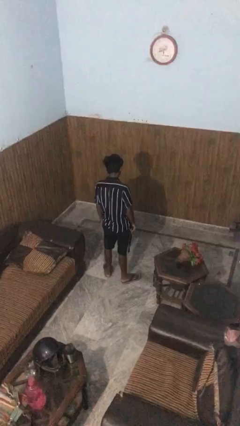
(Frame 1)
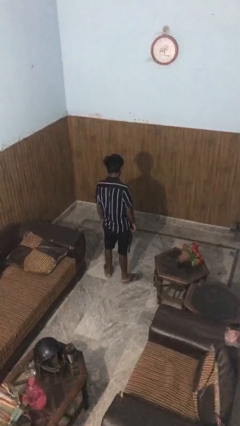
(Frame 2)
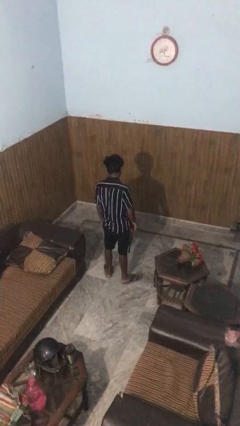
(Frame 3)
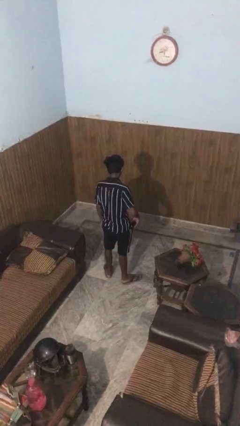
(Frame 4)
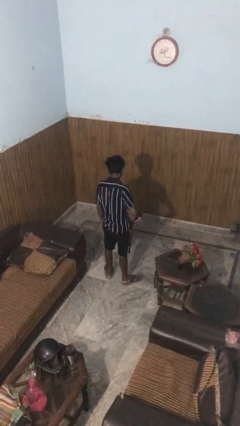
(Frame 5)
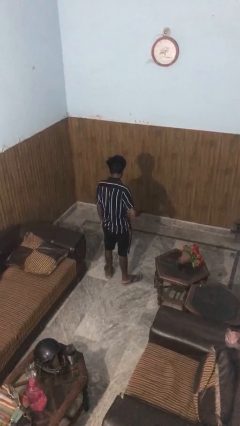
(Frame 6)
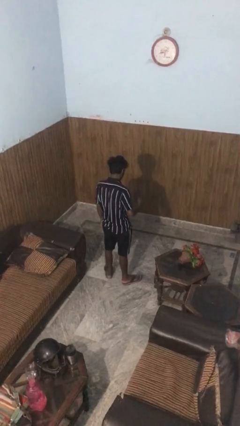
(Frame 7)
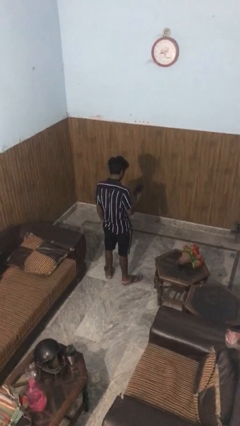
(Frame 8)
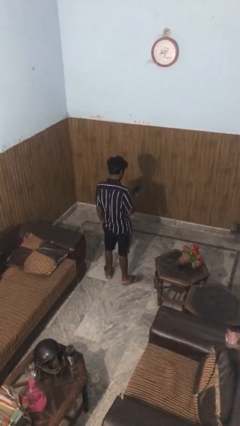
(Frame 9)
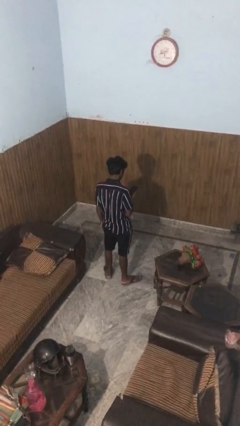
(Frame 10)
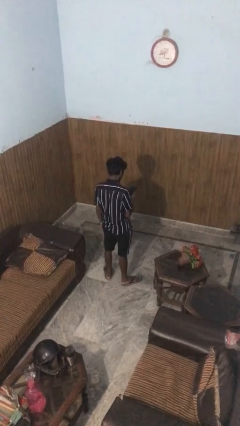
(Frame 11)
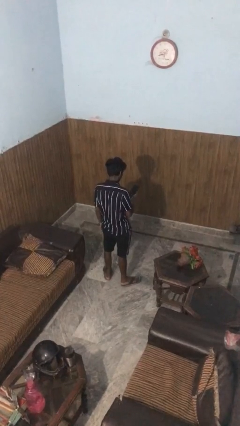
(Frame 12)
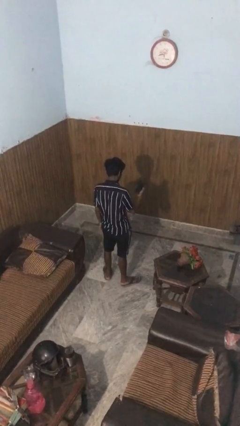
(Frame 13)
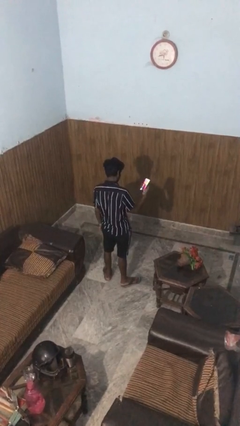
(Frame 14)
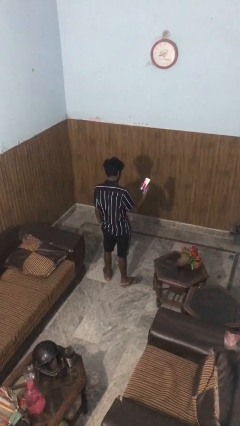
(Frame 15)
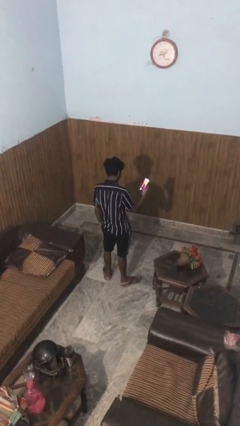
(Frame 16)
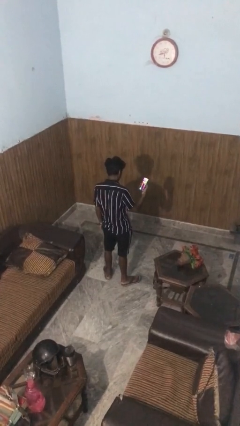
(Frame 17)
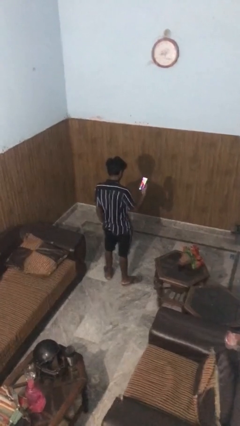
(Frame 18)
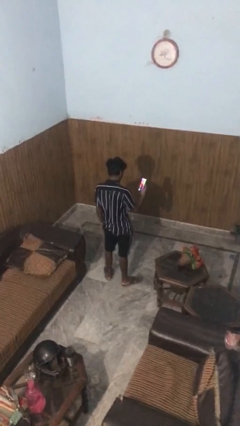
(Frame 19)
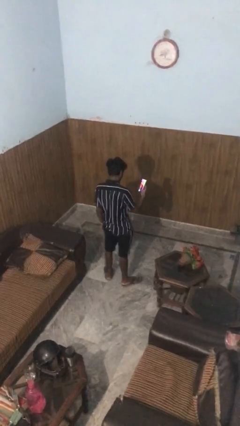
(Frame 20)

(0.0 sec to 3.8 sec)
person takes phone from pocket

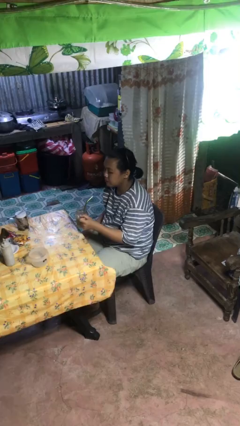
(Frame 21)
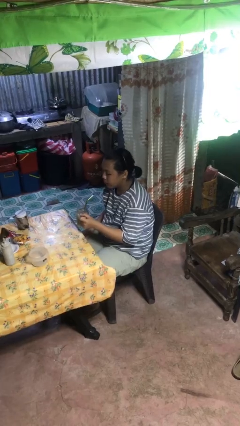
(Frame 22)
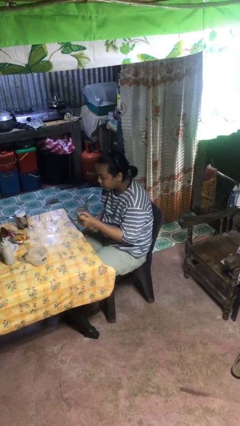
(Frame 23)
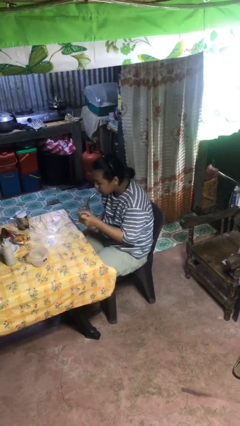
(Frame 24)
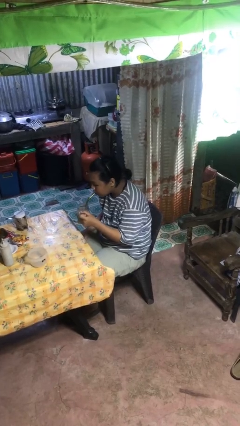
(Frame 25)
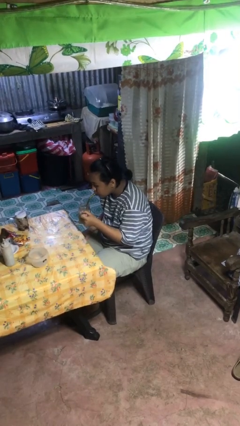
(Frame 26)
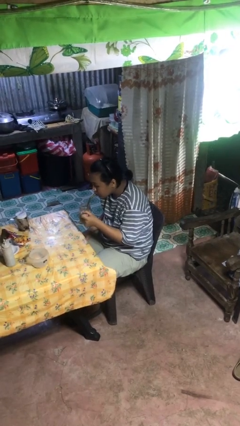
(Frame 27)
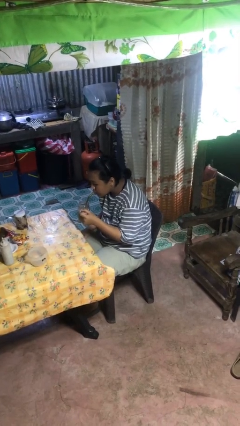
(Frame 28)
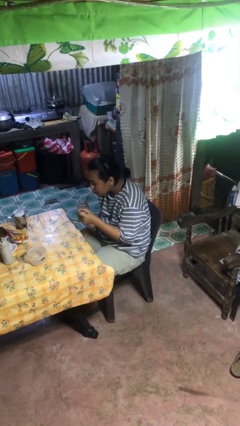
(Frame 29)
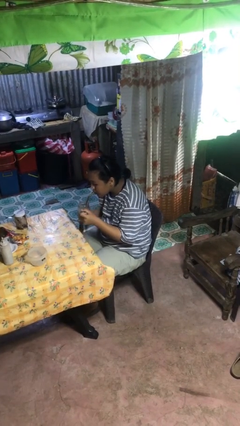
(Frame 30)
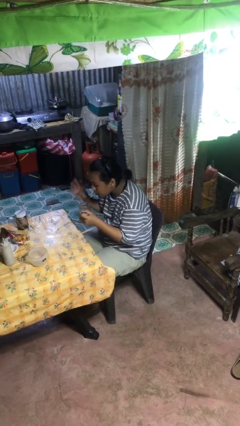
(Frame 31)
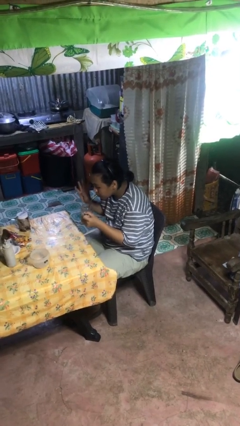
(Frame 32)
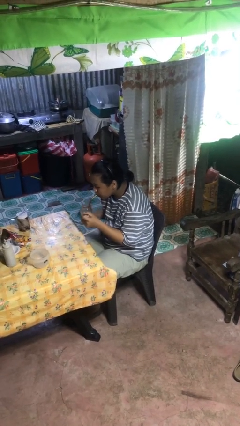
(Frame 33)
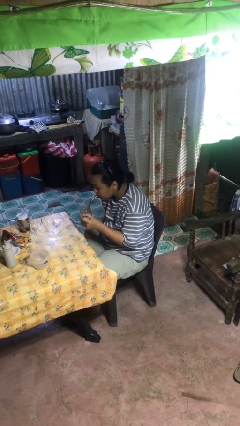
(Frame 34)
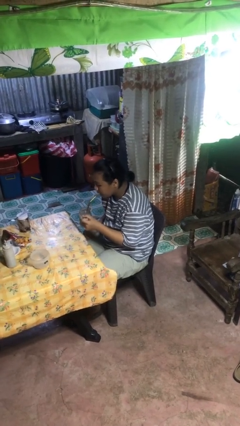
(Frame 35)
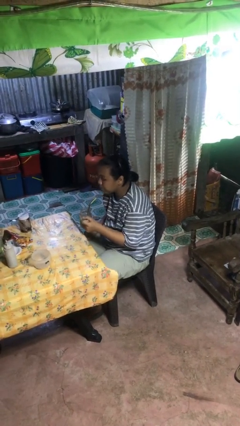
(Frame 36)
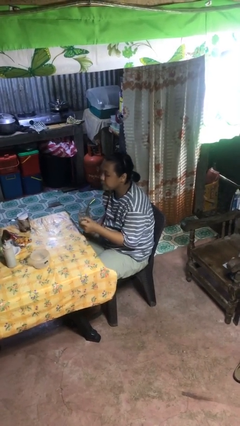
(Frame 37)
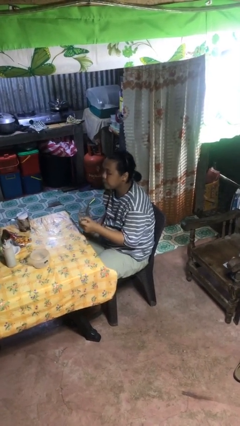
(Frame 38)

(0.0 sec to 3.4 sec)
person drinks from straw

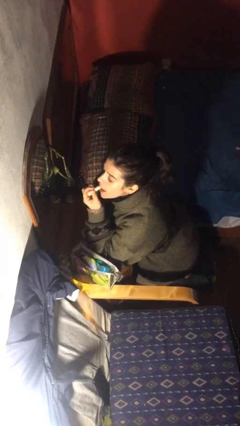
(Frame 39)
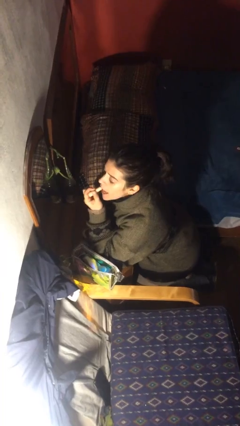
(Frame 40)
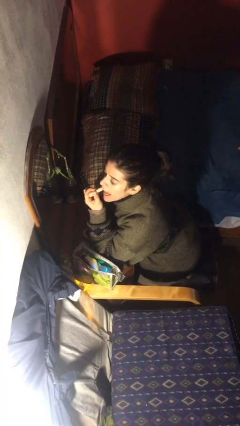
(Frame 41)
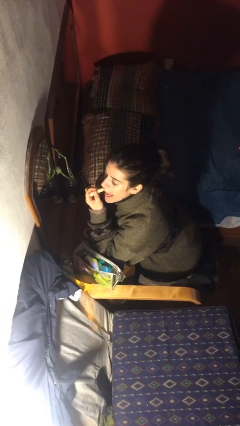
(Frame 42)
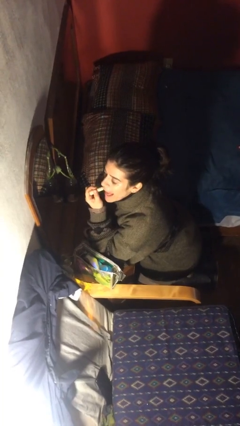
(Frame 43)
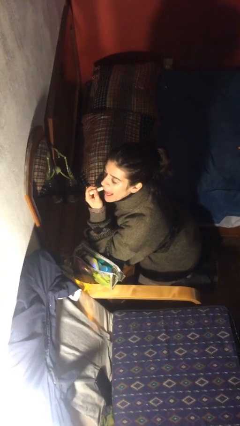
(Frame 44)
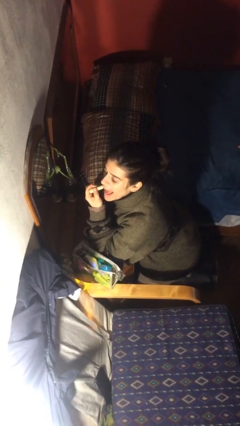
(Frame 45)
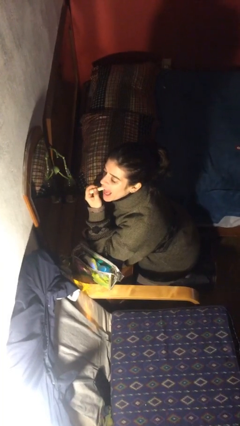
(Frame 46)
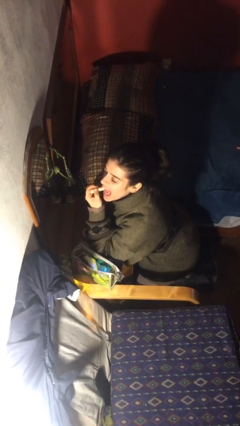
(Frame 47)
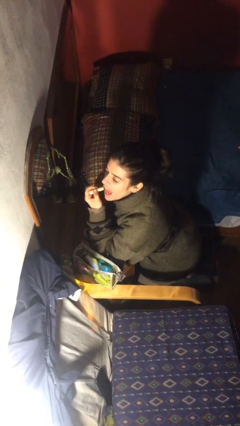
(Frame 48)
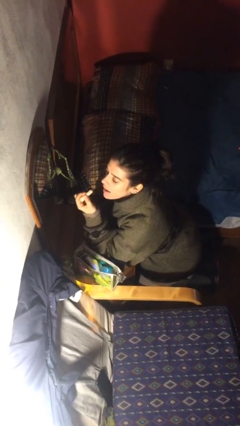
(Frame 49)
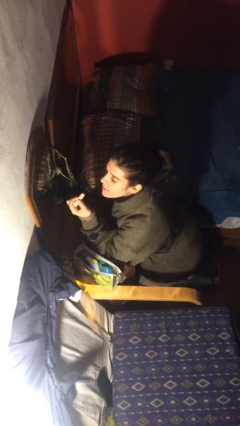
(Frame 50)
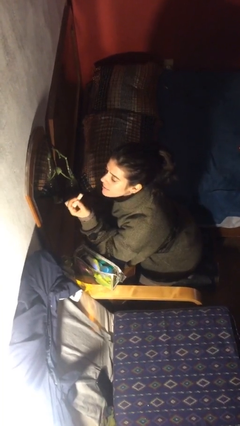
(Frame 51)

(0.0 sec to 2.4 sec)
person applies lip makeup

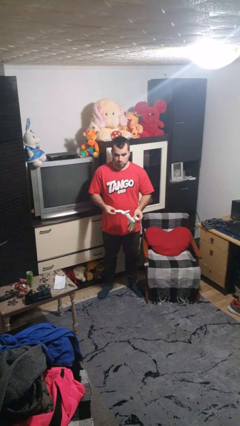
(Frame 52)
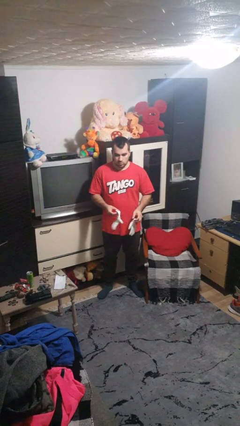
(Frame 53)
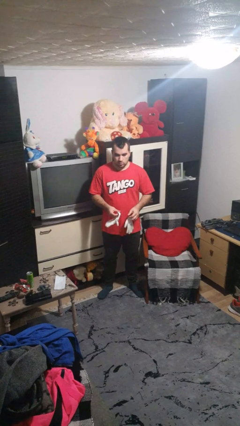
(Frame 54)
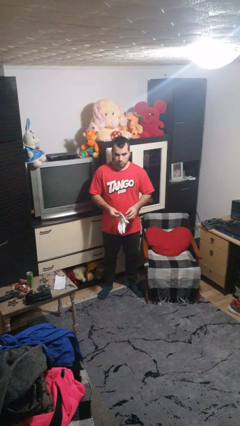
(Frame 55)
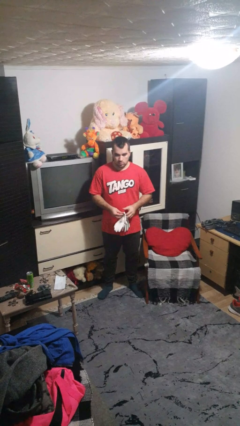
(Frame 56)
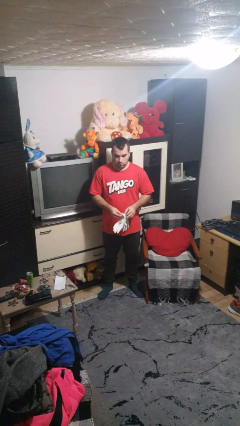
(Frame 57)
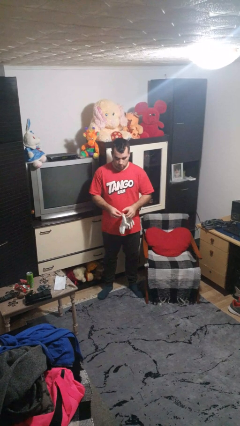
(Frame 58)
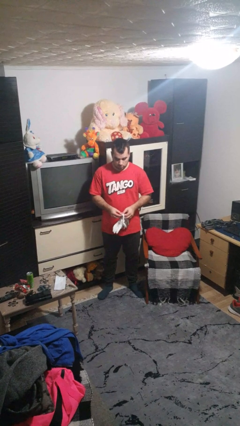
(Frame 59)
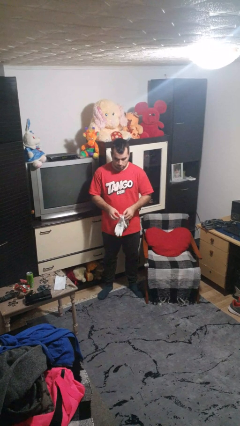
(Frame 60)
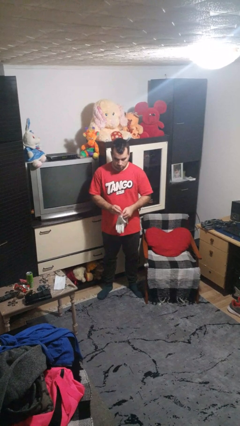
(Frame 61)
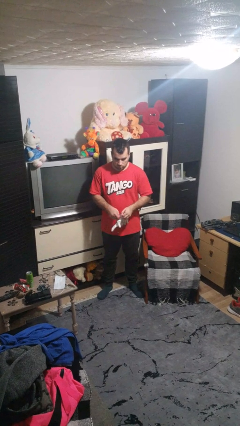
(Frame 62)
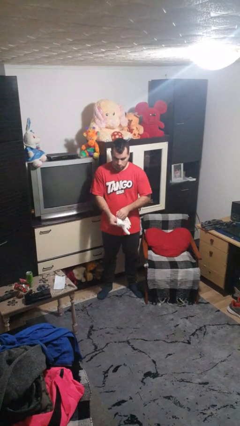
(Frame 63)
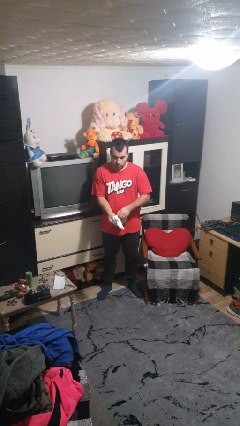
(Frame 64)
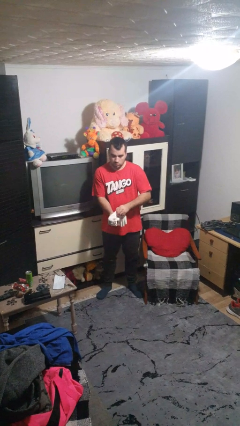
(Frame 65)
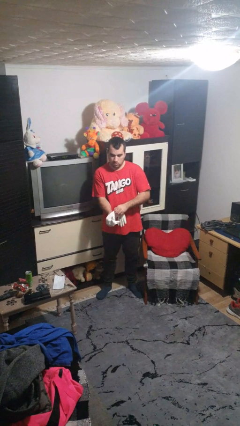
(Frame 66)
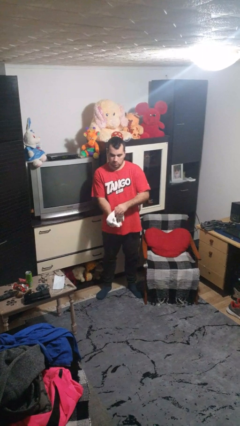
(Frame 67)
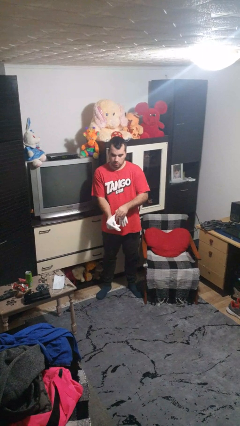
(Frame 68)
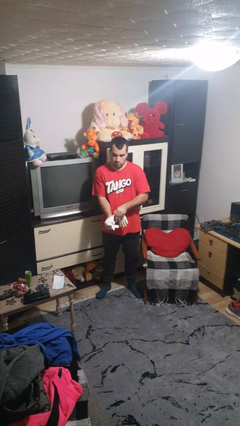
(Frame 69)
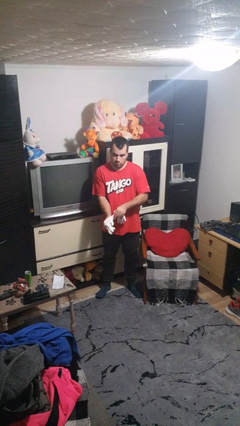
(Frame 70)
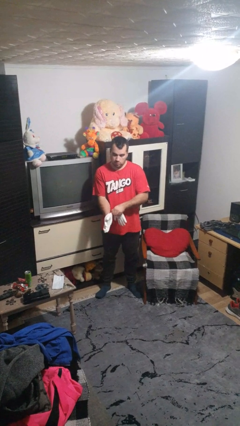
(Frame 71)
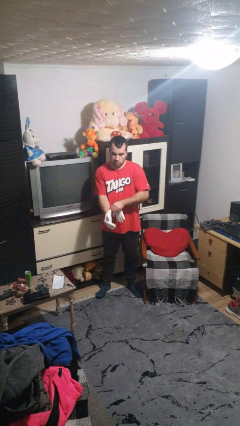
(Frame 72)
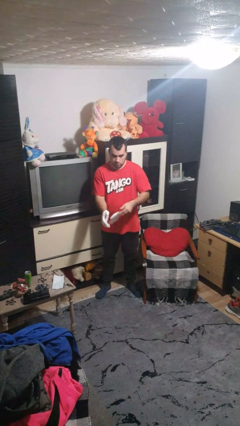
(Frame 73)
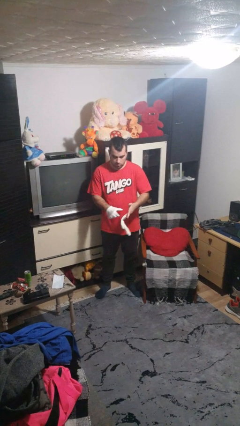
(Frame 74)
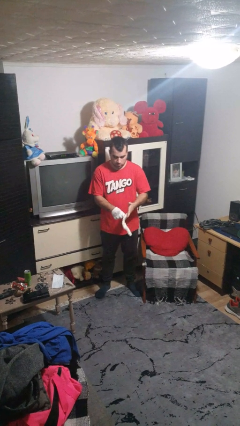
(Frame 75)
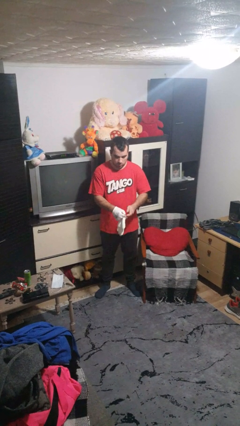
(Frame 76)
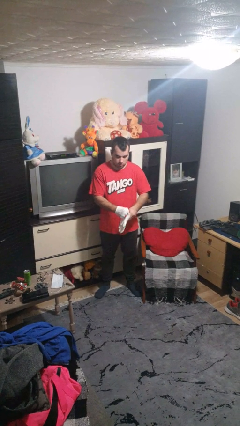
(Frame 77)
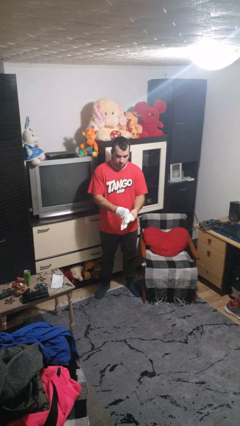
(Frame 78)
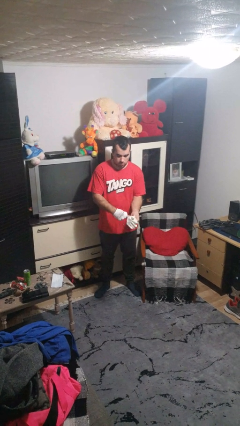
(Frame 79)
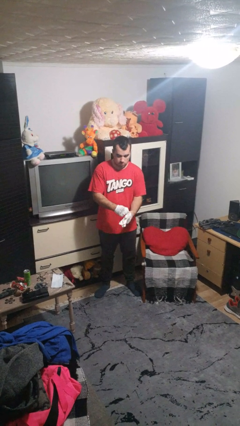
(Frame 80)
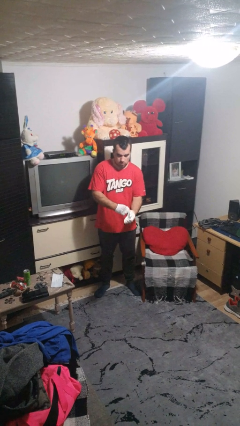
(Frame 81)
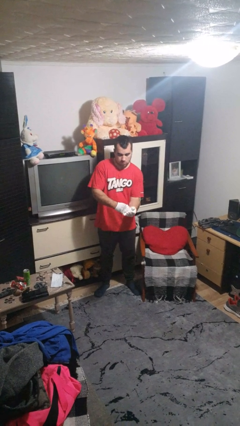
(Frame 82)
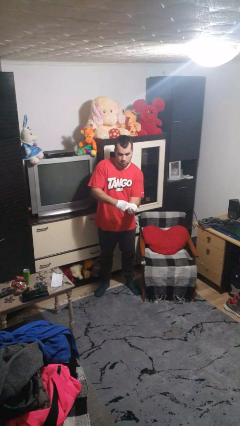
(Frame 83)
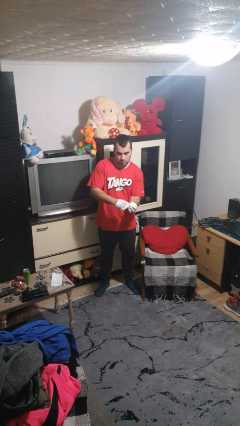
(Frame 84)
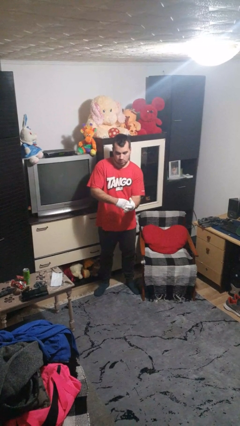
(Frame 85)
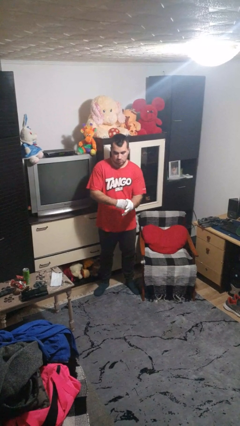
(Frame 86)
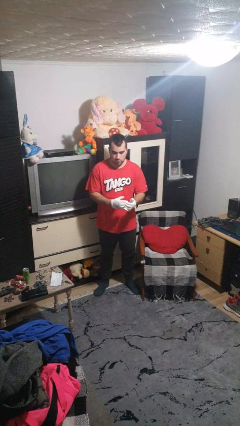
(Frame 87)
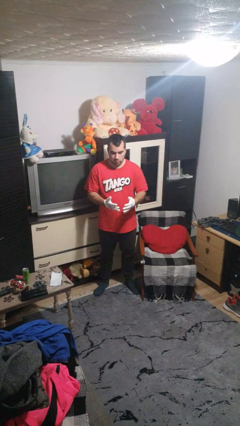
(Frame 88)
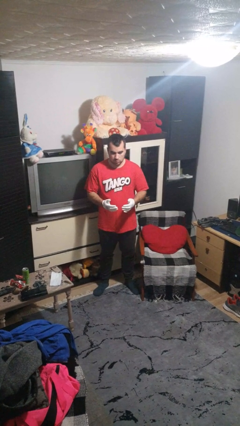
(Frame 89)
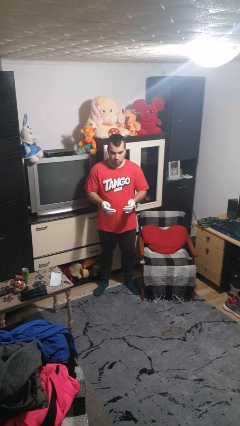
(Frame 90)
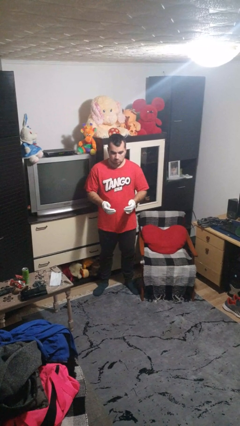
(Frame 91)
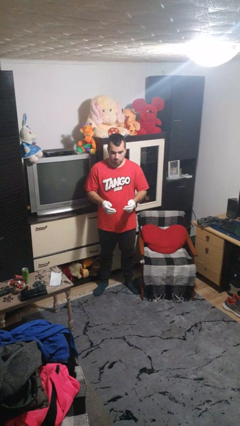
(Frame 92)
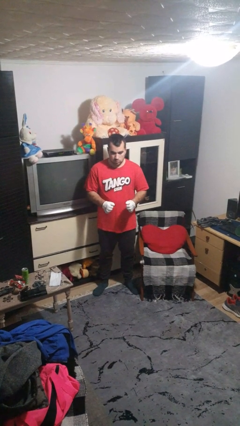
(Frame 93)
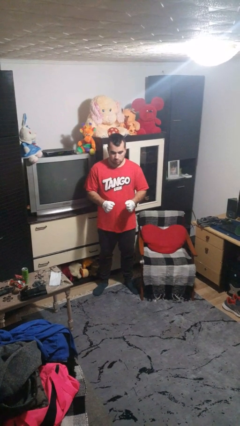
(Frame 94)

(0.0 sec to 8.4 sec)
person puts on gloves
